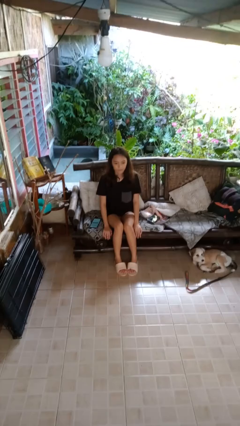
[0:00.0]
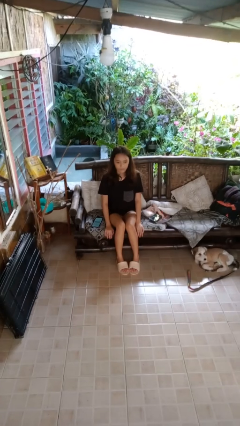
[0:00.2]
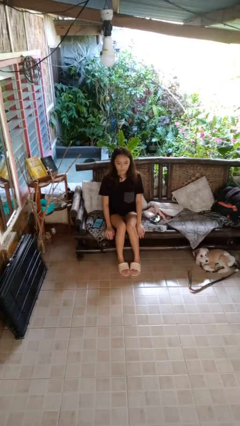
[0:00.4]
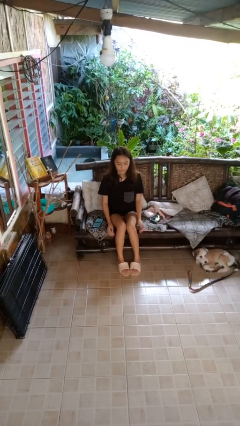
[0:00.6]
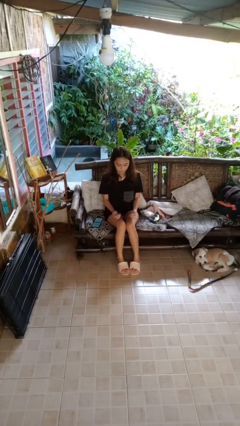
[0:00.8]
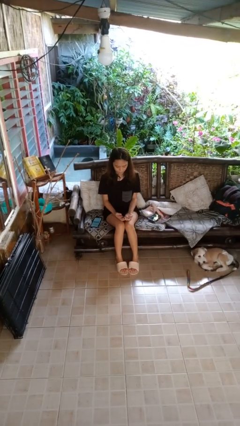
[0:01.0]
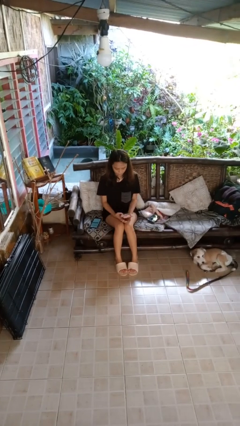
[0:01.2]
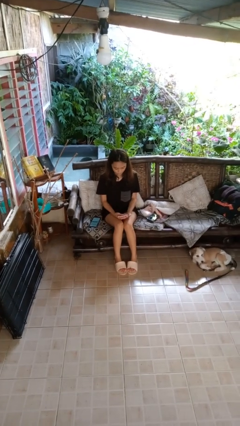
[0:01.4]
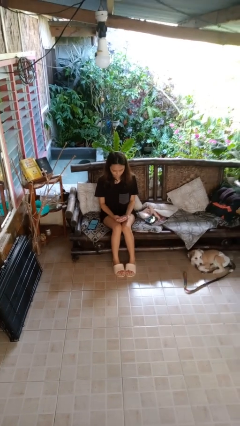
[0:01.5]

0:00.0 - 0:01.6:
person looks at hands in lap

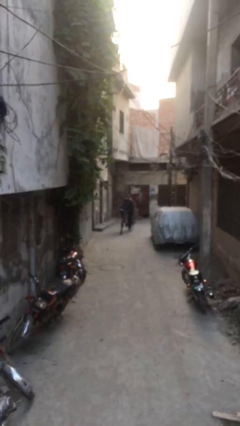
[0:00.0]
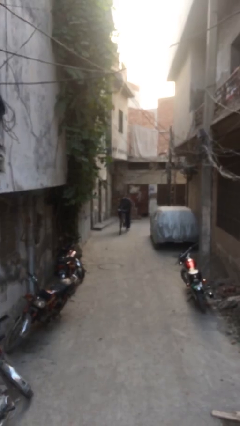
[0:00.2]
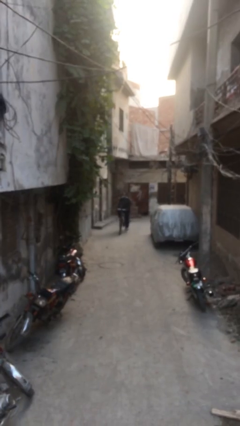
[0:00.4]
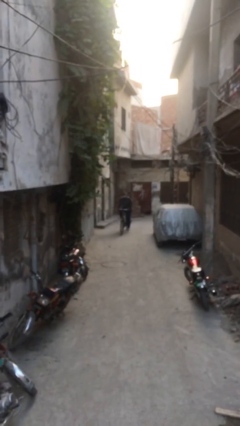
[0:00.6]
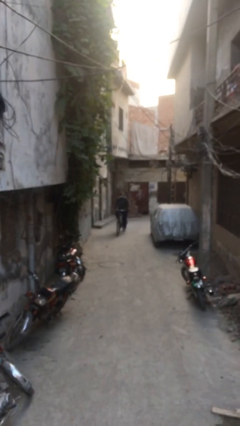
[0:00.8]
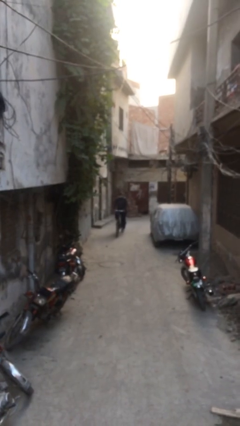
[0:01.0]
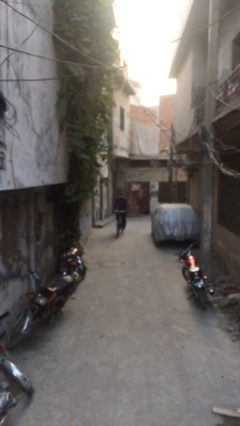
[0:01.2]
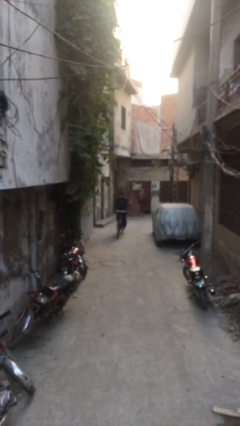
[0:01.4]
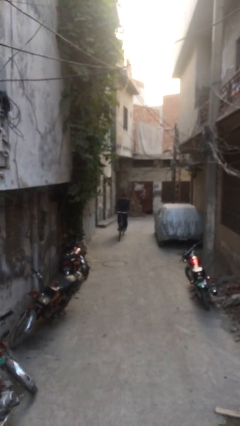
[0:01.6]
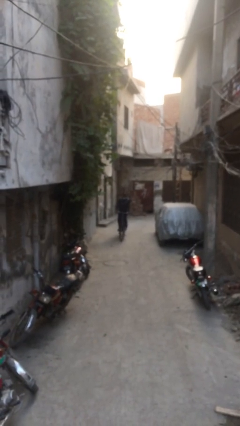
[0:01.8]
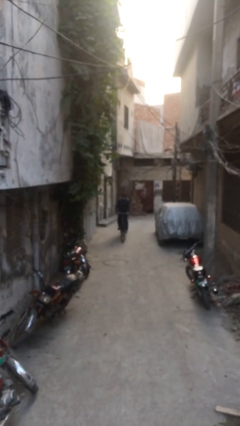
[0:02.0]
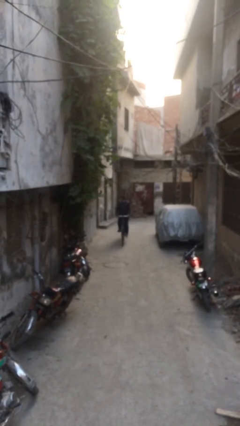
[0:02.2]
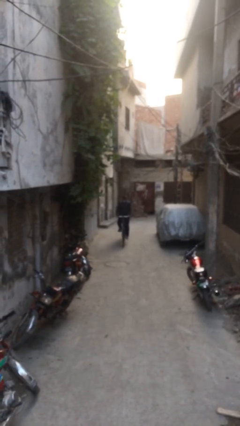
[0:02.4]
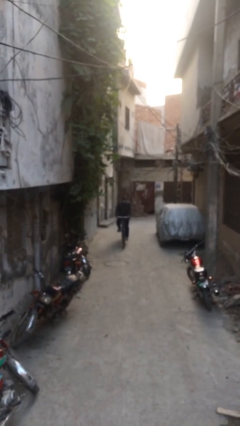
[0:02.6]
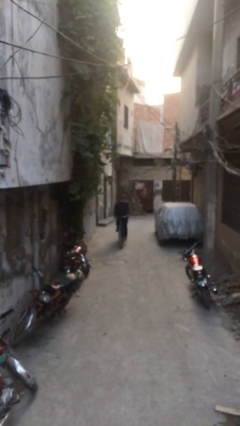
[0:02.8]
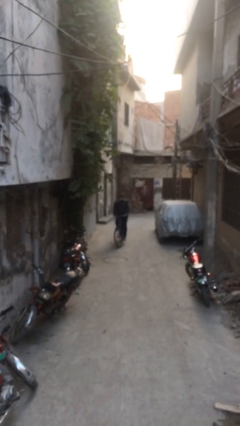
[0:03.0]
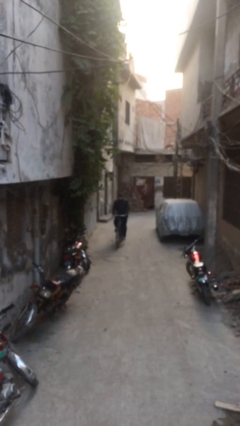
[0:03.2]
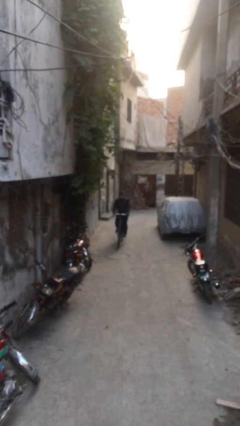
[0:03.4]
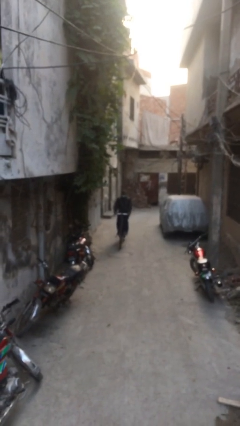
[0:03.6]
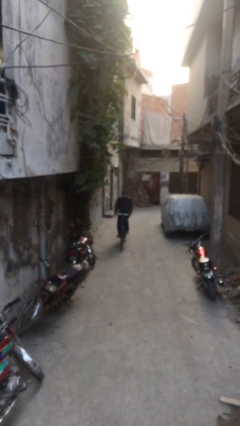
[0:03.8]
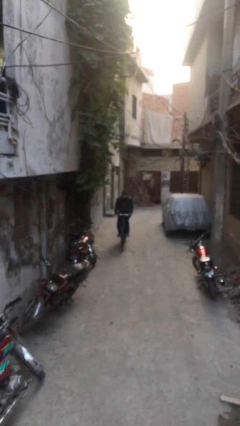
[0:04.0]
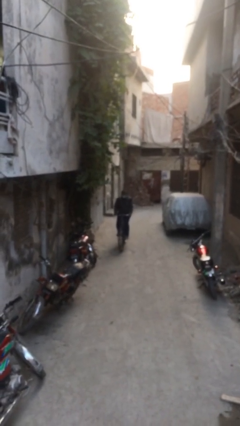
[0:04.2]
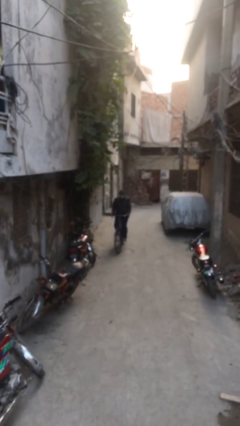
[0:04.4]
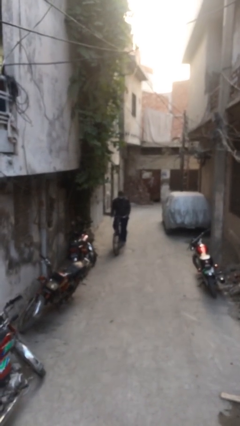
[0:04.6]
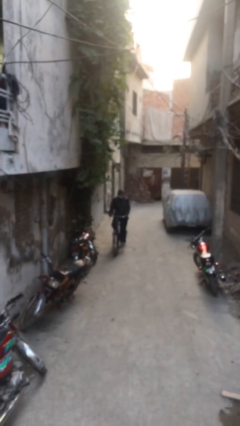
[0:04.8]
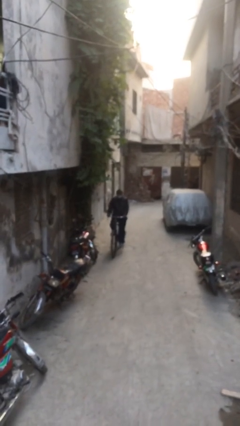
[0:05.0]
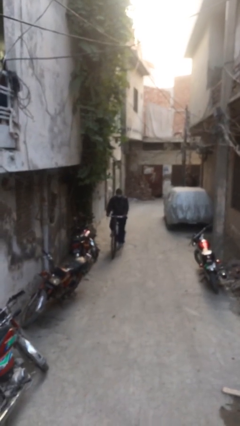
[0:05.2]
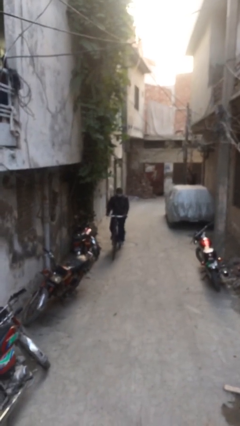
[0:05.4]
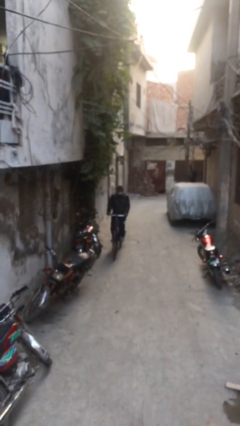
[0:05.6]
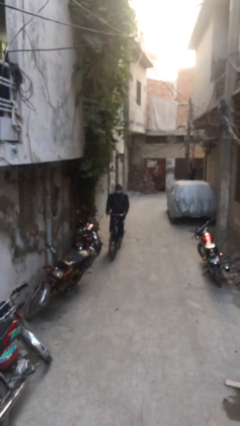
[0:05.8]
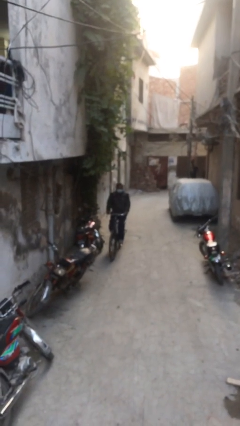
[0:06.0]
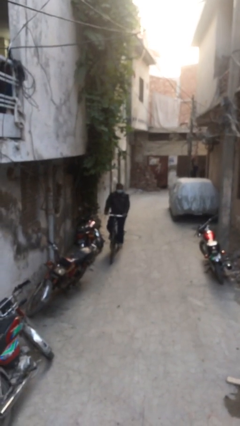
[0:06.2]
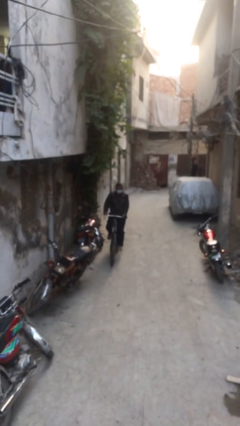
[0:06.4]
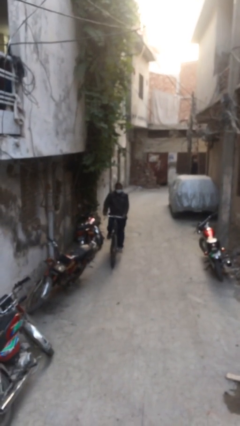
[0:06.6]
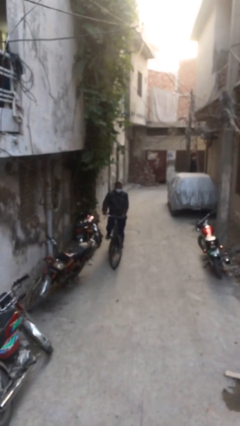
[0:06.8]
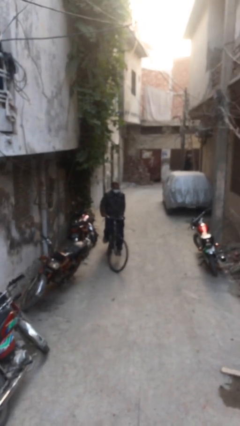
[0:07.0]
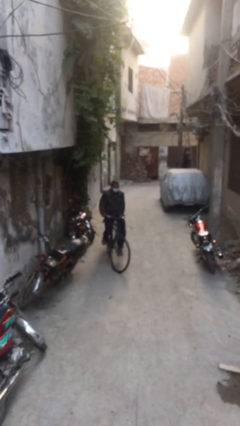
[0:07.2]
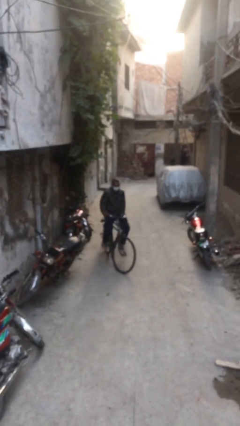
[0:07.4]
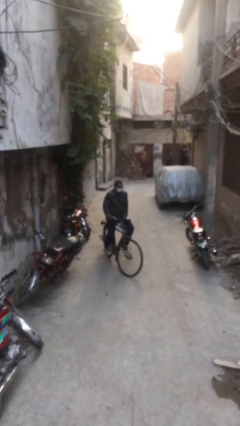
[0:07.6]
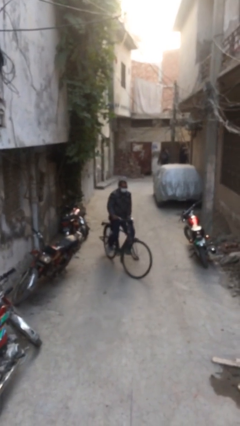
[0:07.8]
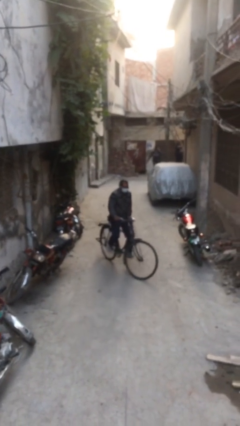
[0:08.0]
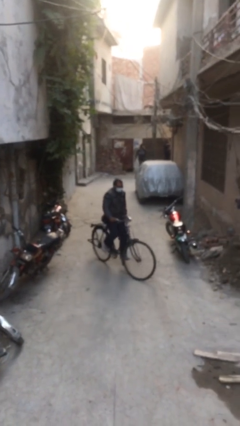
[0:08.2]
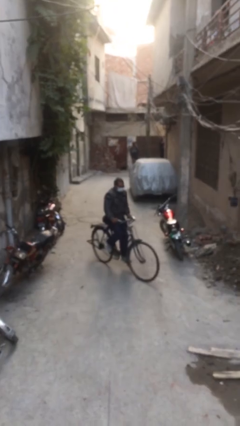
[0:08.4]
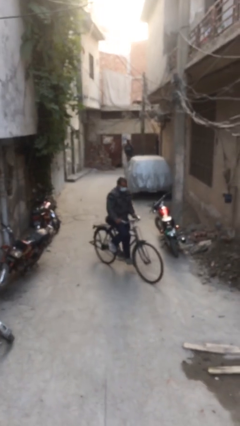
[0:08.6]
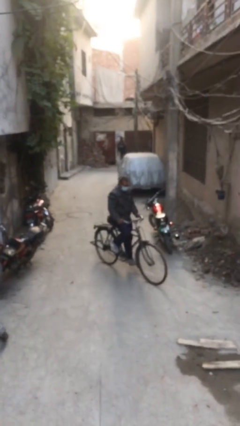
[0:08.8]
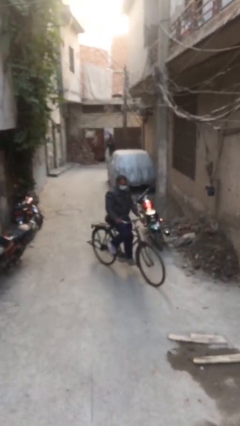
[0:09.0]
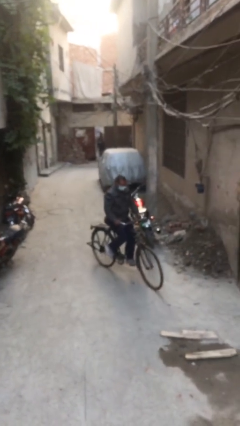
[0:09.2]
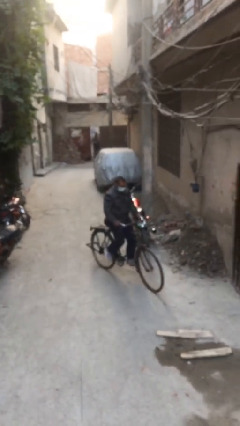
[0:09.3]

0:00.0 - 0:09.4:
person rides bicycle

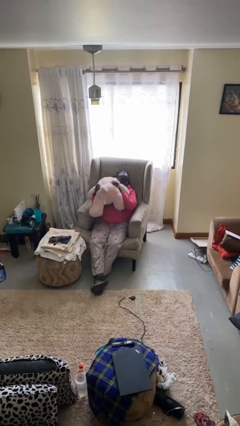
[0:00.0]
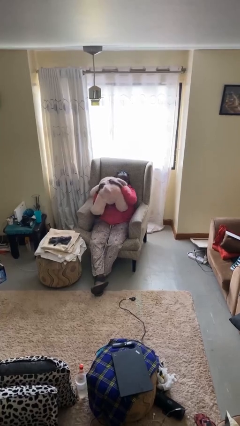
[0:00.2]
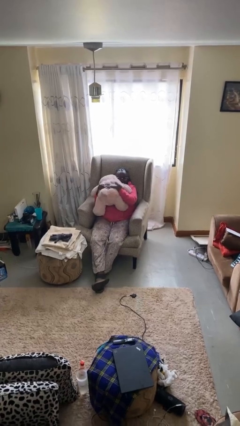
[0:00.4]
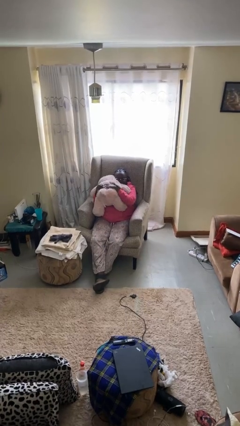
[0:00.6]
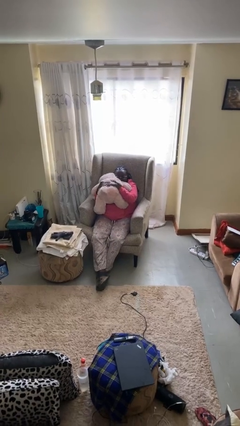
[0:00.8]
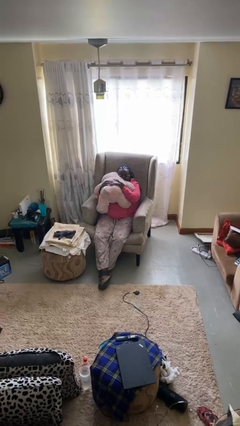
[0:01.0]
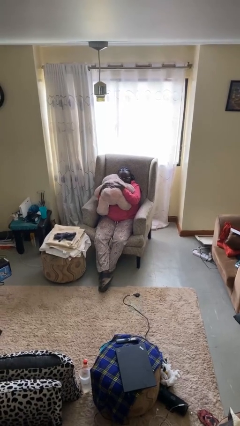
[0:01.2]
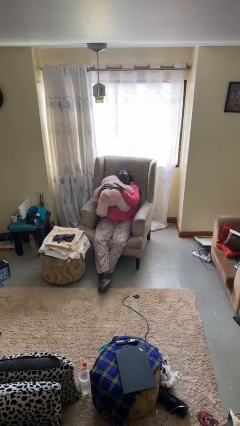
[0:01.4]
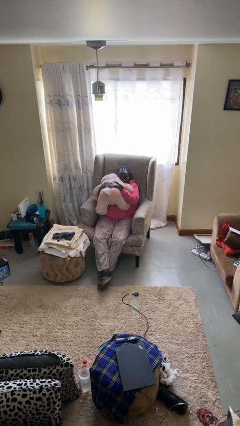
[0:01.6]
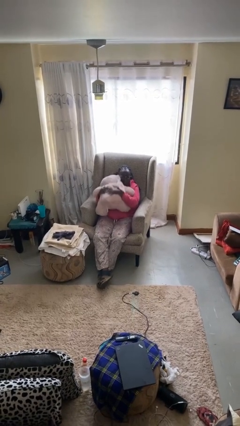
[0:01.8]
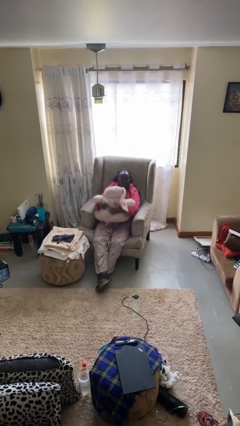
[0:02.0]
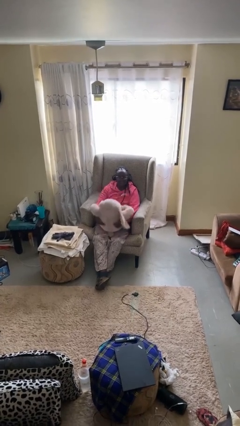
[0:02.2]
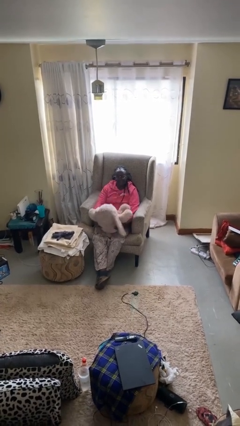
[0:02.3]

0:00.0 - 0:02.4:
person hugs stuffed animal

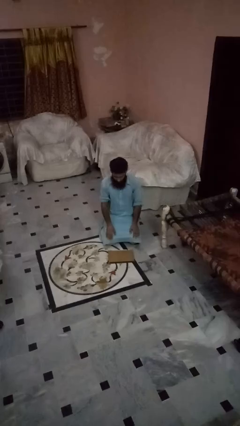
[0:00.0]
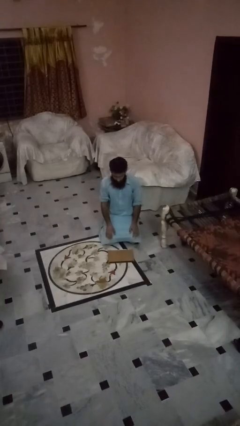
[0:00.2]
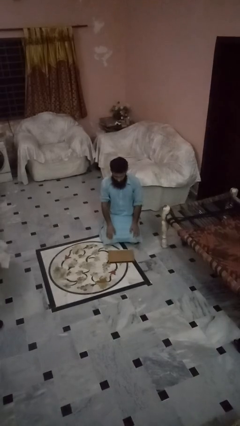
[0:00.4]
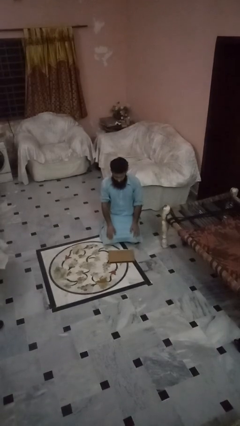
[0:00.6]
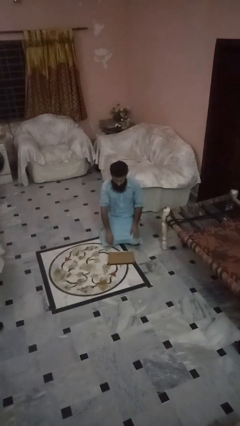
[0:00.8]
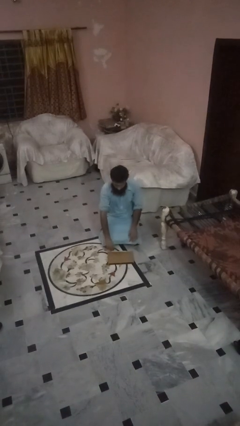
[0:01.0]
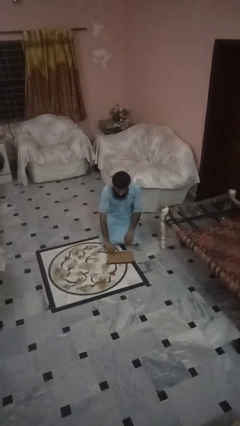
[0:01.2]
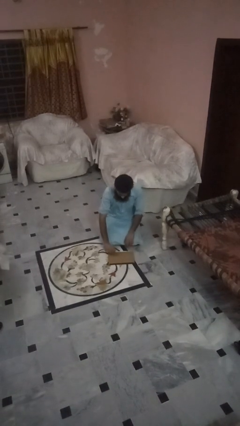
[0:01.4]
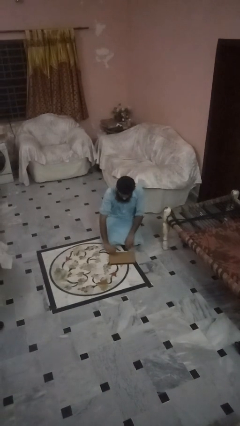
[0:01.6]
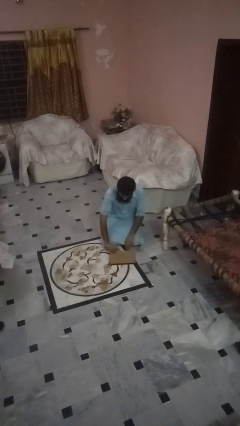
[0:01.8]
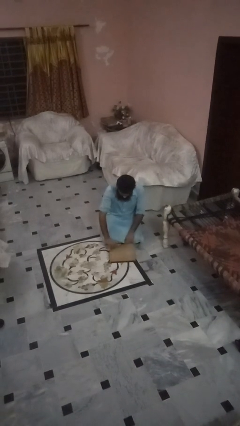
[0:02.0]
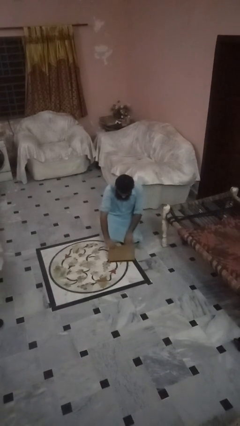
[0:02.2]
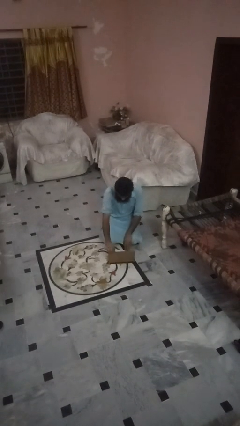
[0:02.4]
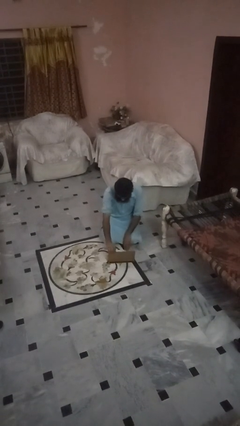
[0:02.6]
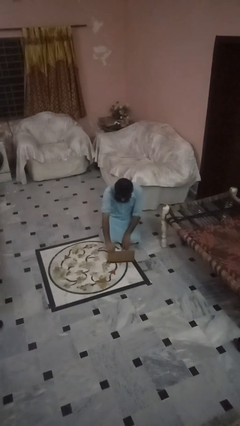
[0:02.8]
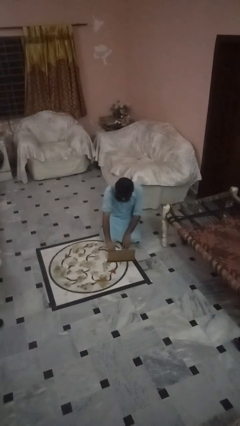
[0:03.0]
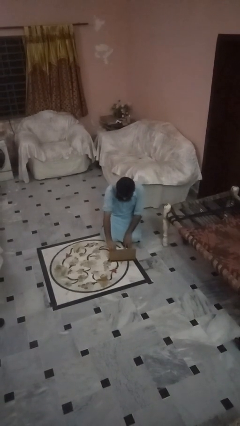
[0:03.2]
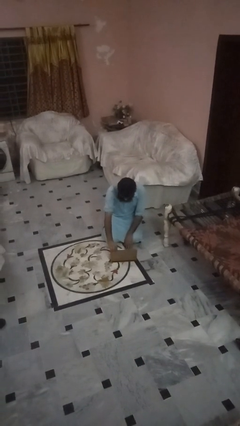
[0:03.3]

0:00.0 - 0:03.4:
person opens laptop

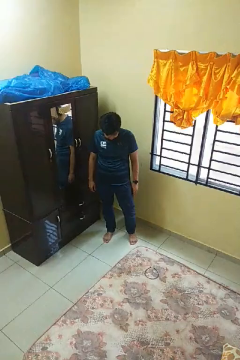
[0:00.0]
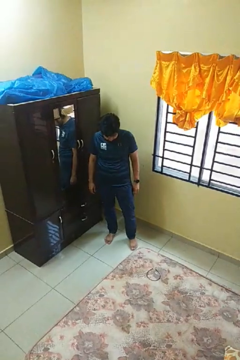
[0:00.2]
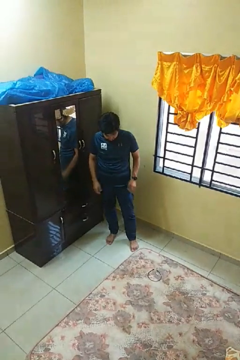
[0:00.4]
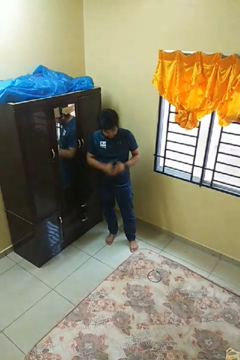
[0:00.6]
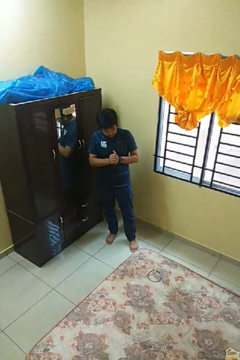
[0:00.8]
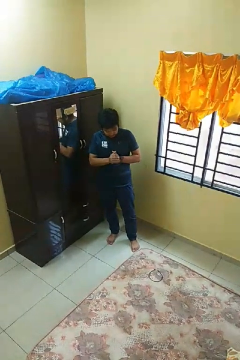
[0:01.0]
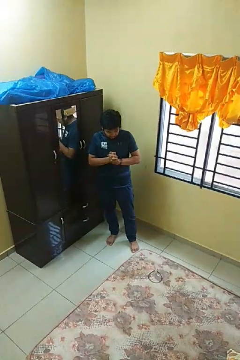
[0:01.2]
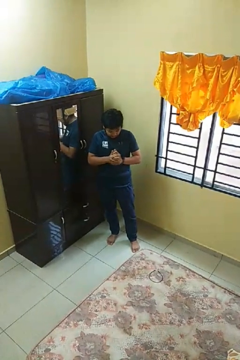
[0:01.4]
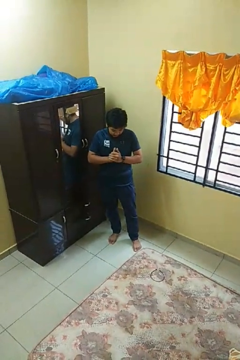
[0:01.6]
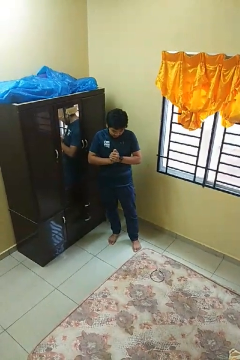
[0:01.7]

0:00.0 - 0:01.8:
person cracks knuckles
